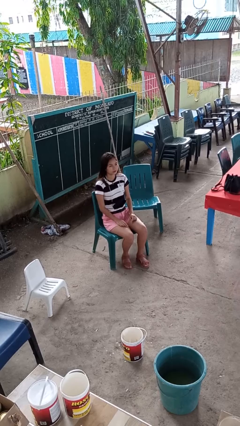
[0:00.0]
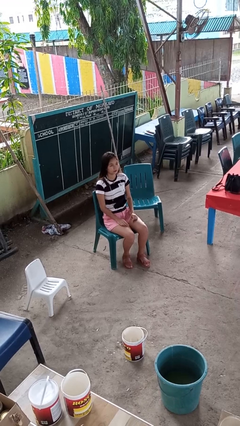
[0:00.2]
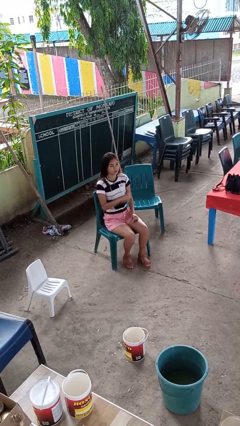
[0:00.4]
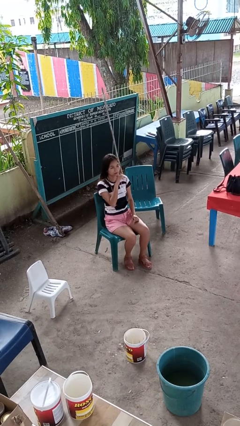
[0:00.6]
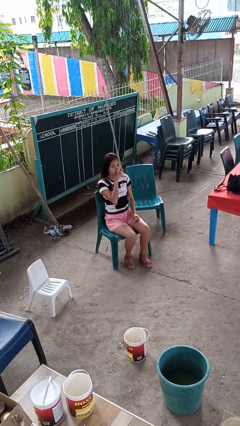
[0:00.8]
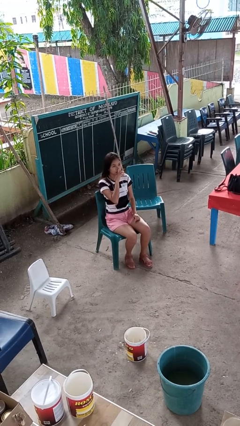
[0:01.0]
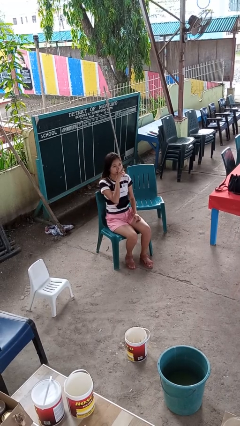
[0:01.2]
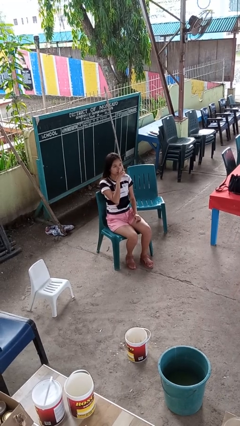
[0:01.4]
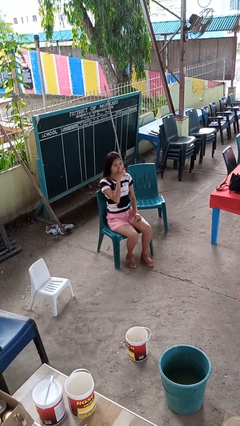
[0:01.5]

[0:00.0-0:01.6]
person gestures be quiet

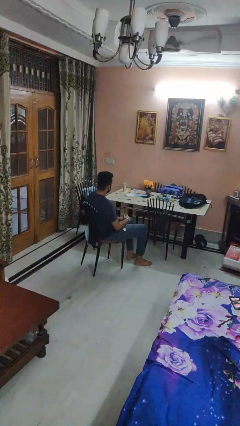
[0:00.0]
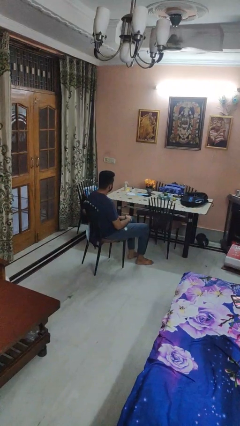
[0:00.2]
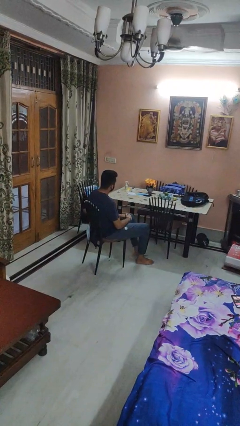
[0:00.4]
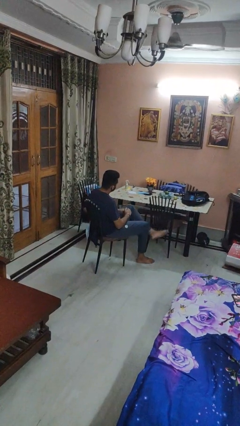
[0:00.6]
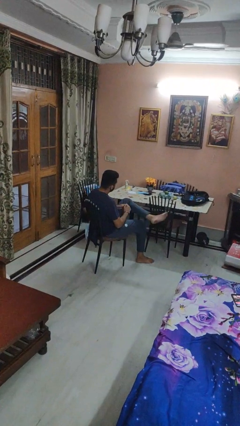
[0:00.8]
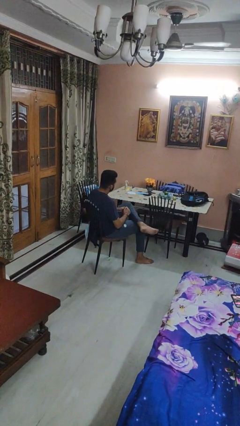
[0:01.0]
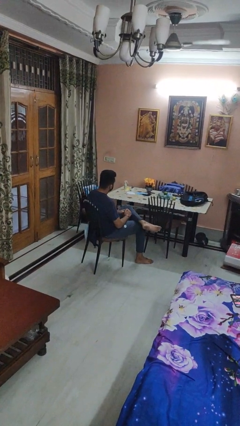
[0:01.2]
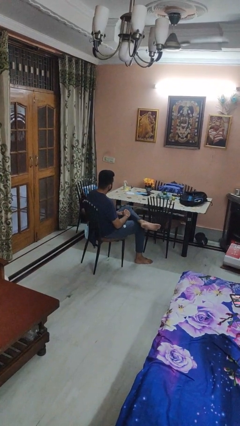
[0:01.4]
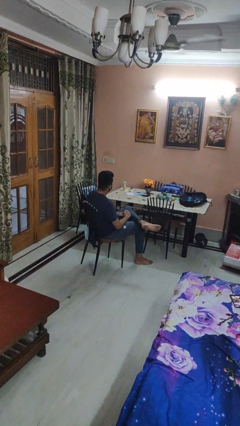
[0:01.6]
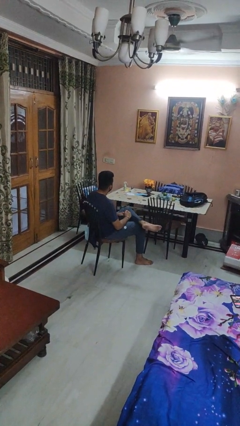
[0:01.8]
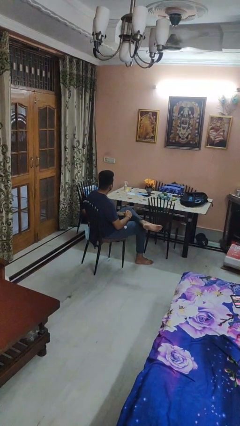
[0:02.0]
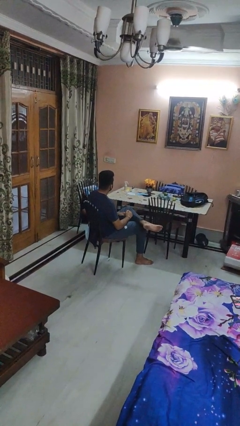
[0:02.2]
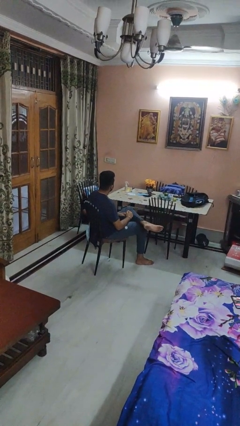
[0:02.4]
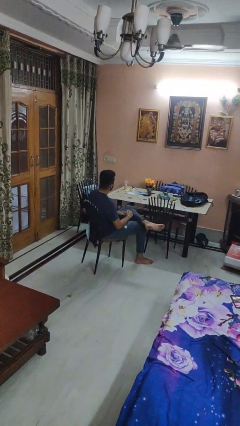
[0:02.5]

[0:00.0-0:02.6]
person crosses legs

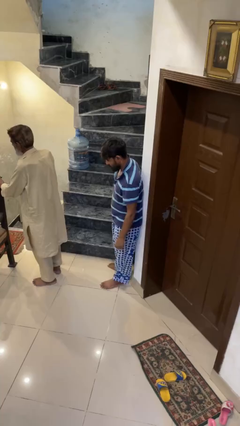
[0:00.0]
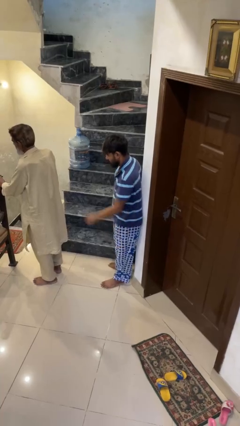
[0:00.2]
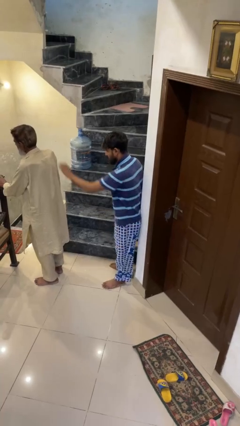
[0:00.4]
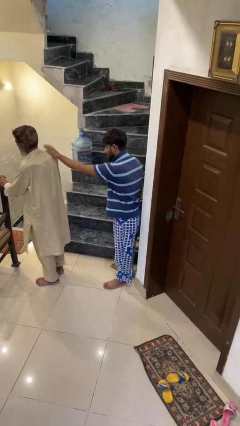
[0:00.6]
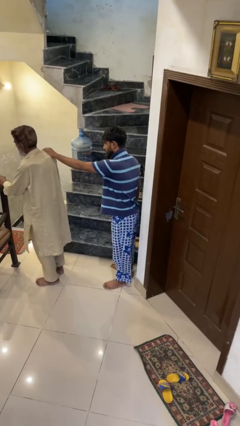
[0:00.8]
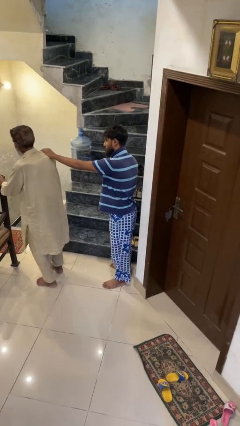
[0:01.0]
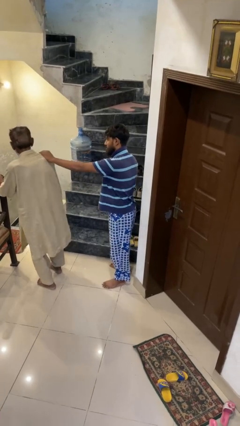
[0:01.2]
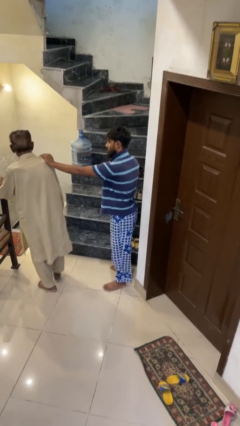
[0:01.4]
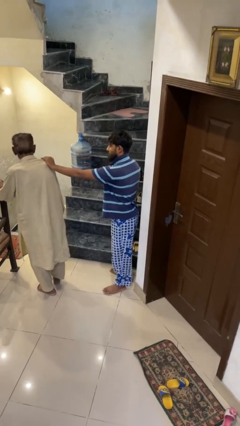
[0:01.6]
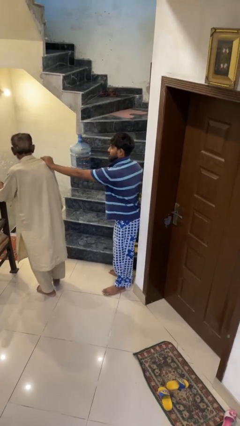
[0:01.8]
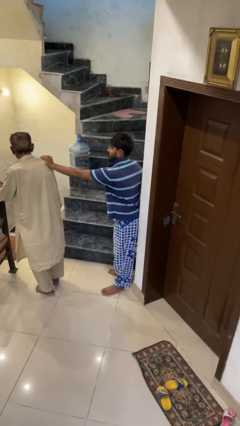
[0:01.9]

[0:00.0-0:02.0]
person grabs person by shoulder

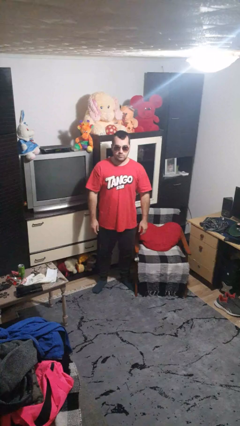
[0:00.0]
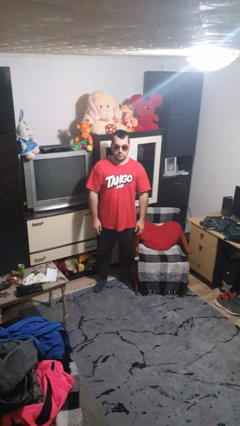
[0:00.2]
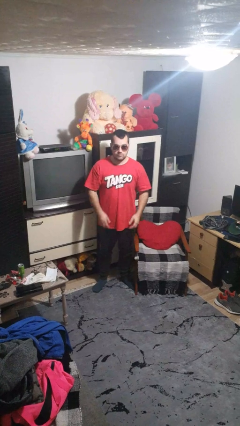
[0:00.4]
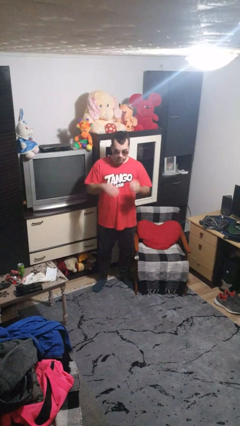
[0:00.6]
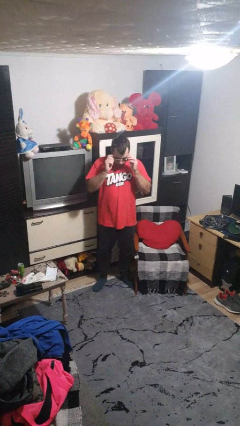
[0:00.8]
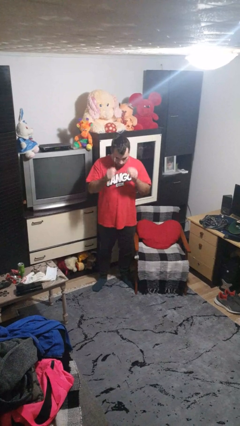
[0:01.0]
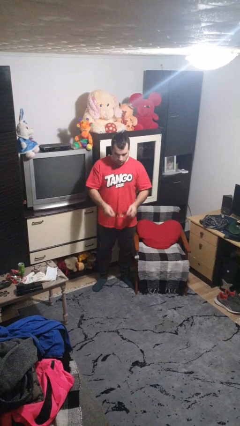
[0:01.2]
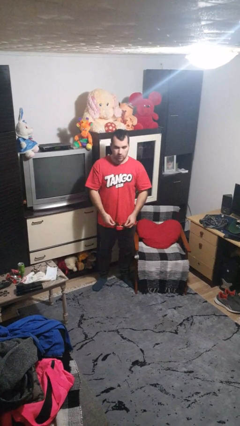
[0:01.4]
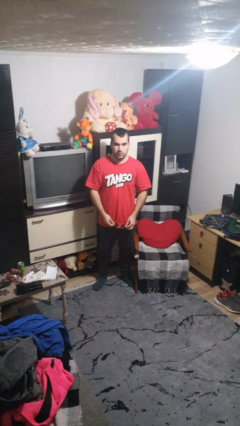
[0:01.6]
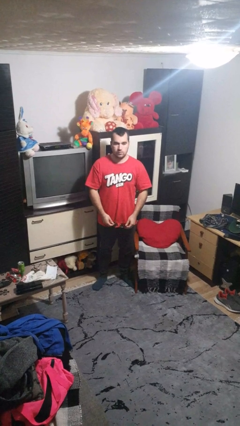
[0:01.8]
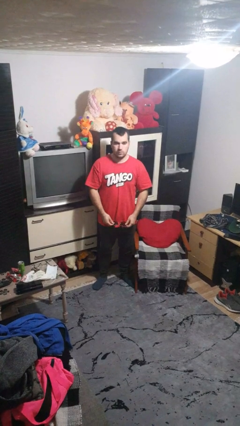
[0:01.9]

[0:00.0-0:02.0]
person takes off sunglasses

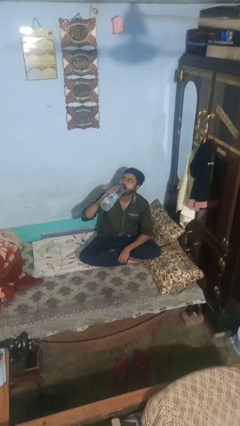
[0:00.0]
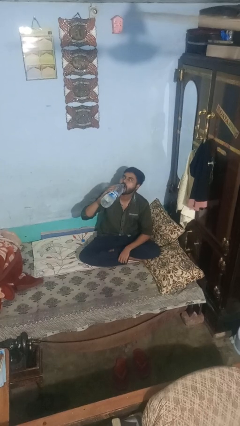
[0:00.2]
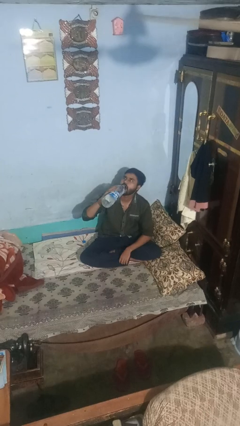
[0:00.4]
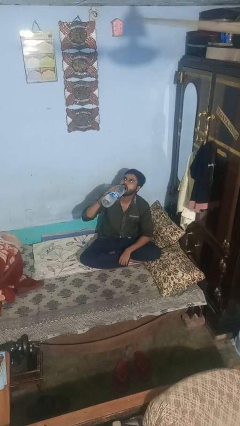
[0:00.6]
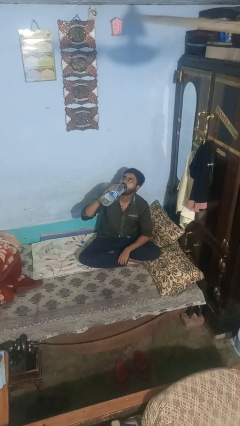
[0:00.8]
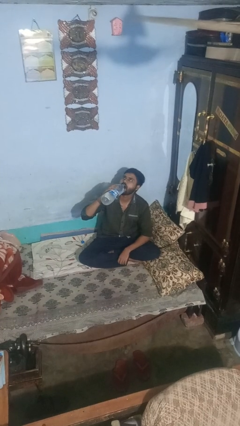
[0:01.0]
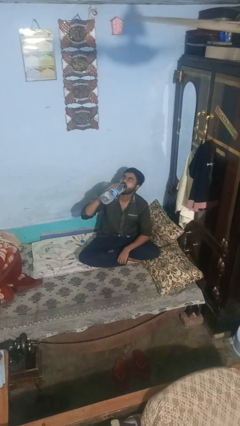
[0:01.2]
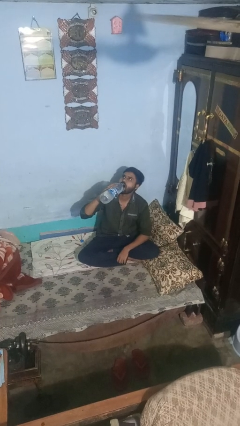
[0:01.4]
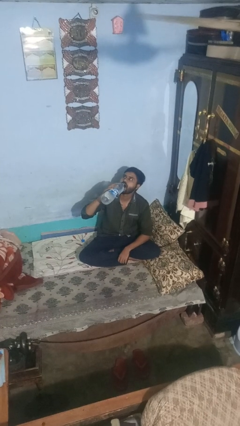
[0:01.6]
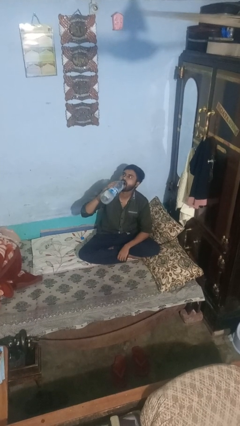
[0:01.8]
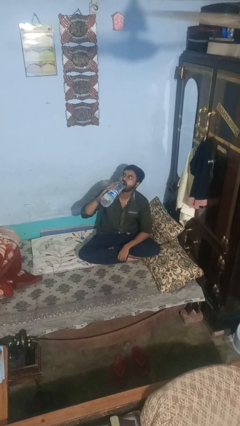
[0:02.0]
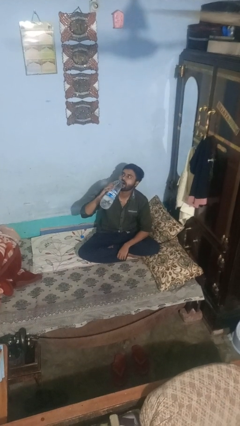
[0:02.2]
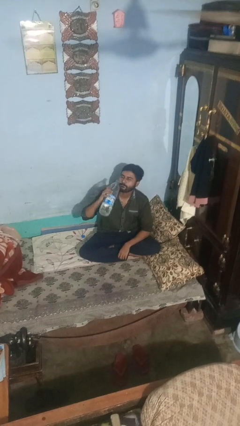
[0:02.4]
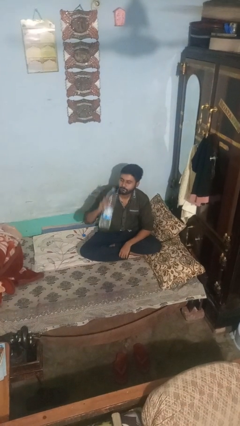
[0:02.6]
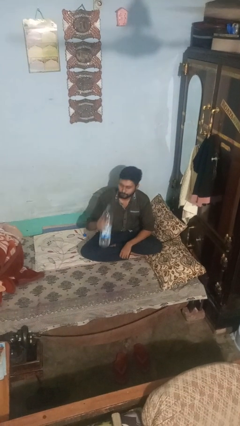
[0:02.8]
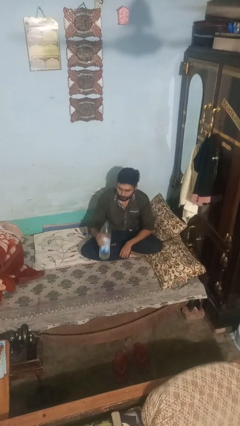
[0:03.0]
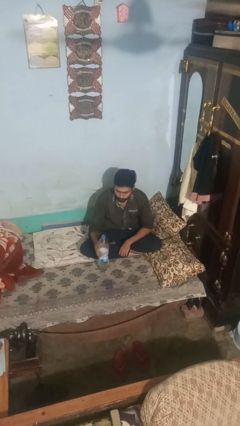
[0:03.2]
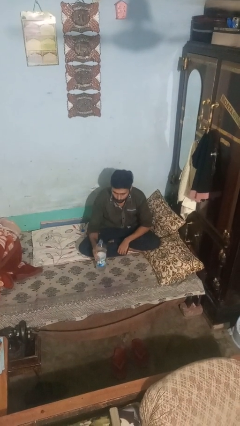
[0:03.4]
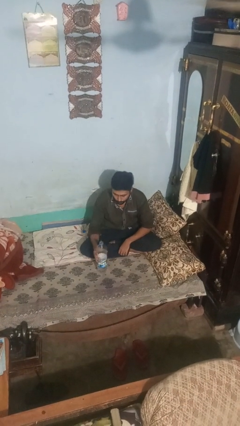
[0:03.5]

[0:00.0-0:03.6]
person drinks from bottle

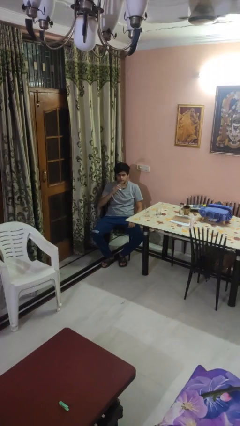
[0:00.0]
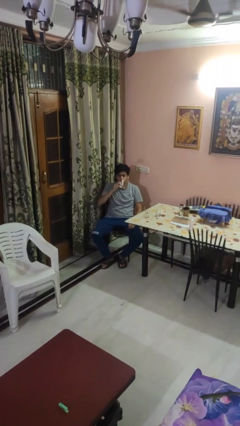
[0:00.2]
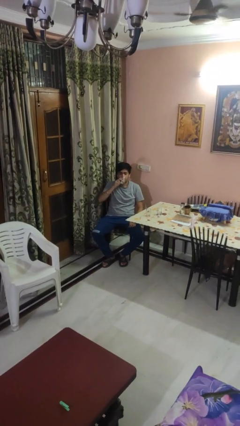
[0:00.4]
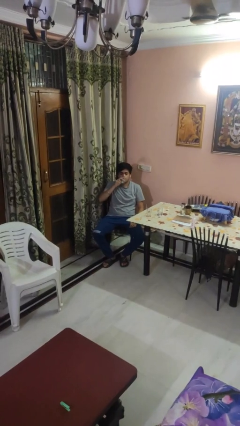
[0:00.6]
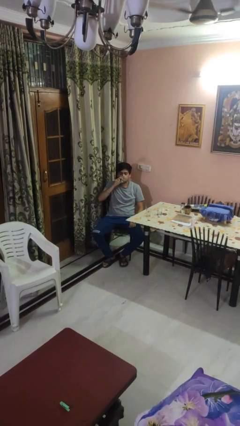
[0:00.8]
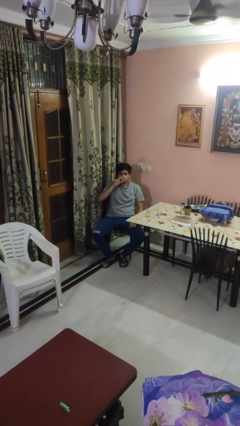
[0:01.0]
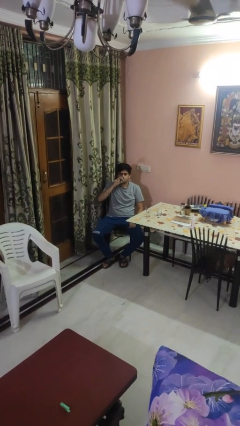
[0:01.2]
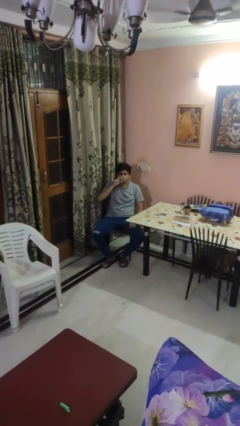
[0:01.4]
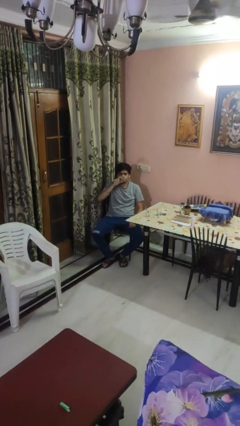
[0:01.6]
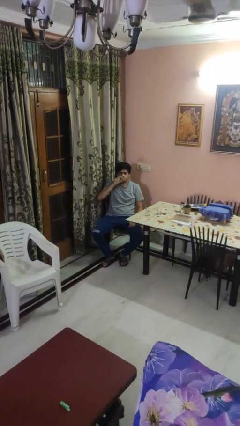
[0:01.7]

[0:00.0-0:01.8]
person drinks from shotglass

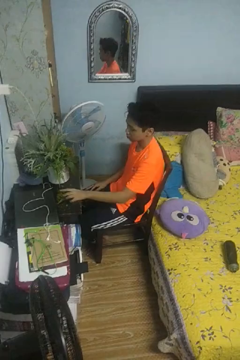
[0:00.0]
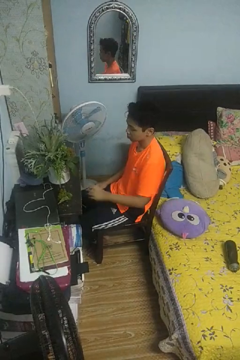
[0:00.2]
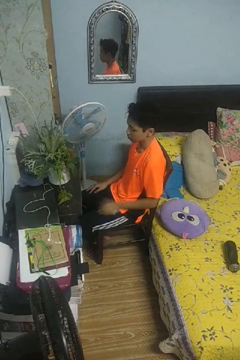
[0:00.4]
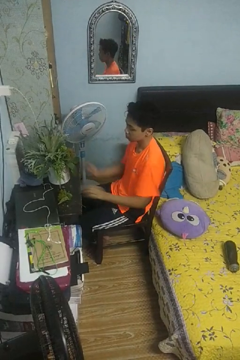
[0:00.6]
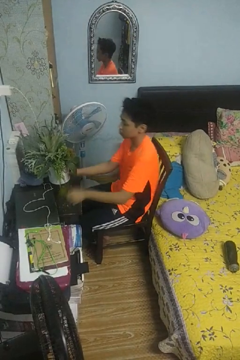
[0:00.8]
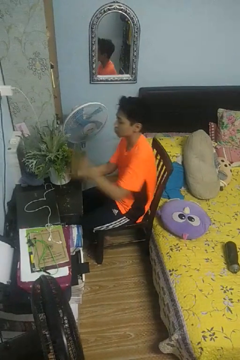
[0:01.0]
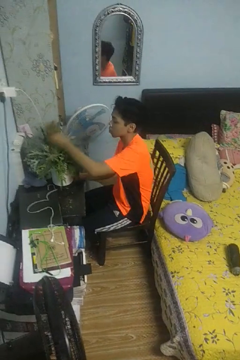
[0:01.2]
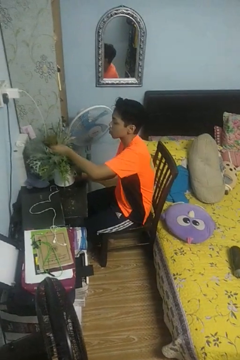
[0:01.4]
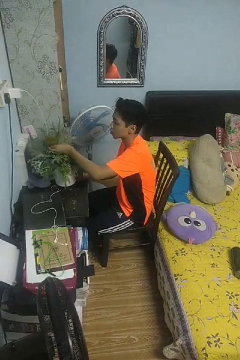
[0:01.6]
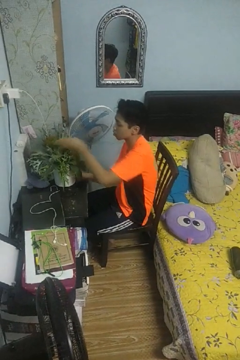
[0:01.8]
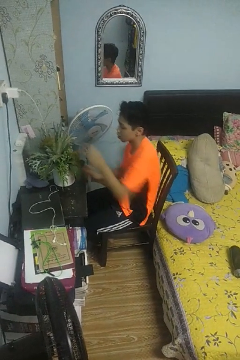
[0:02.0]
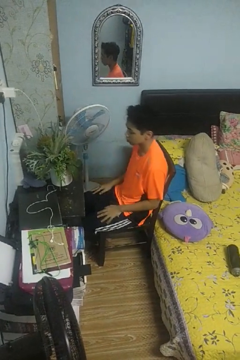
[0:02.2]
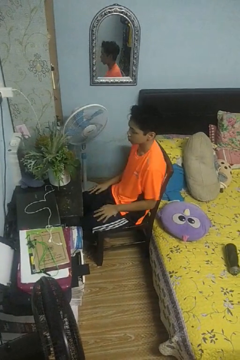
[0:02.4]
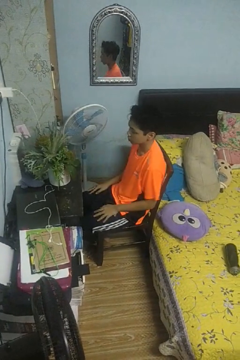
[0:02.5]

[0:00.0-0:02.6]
person arranges flowers in vase

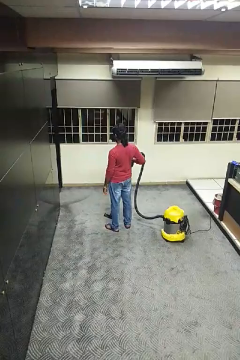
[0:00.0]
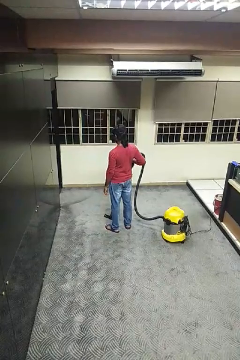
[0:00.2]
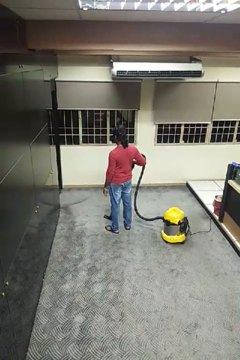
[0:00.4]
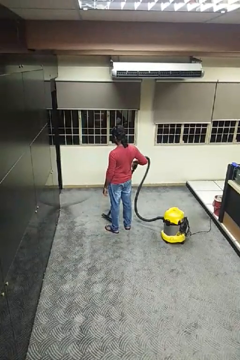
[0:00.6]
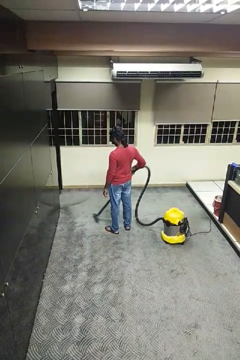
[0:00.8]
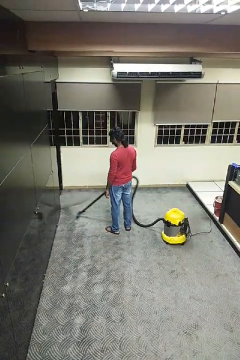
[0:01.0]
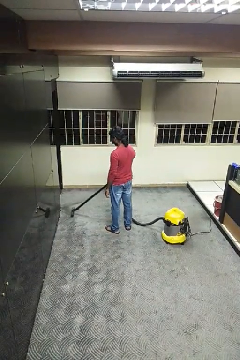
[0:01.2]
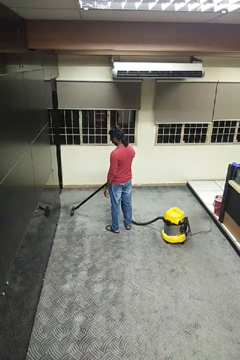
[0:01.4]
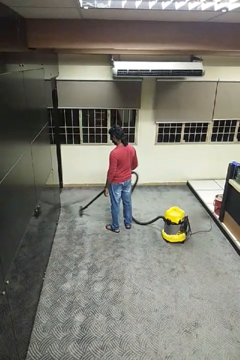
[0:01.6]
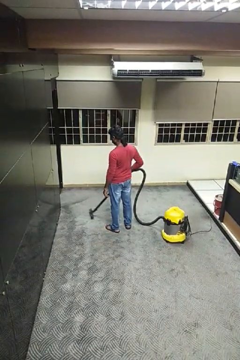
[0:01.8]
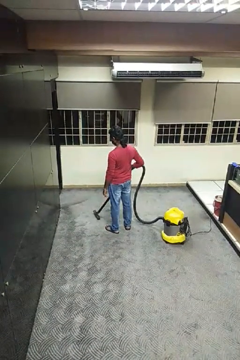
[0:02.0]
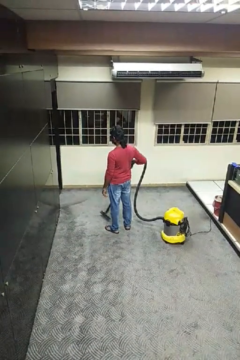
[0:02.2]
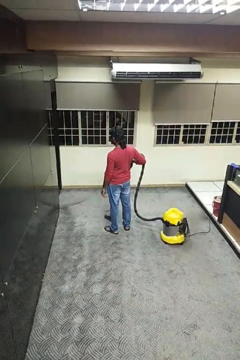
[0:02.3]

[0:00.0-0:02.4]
person vacuums carpet
